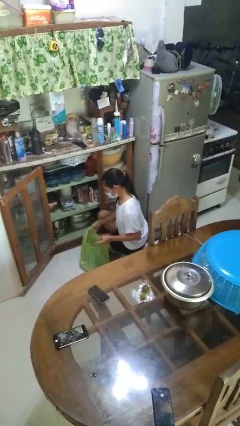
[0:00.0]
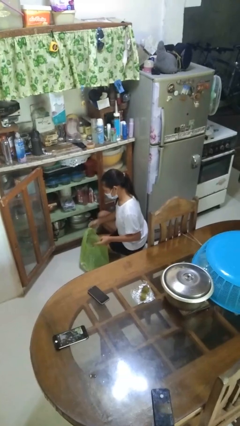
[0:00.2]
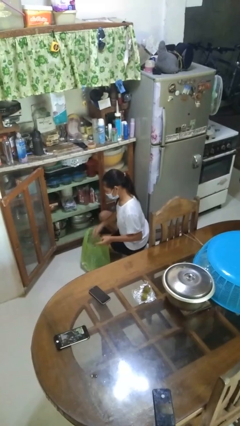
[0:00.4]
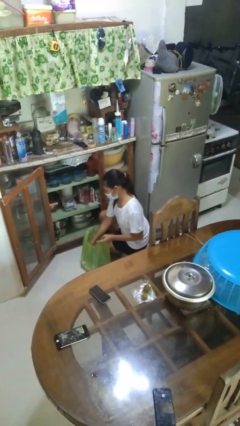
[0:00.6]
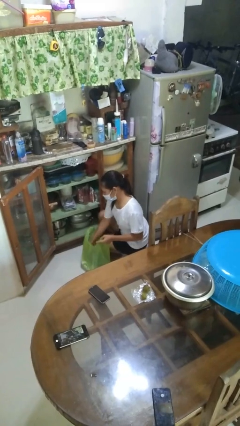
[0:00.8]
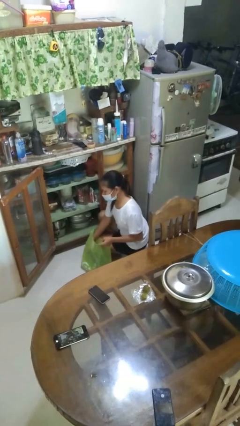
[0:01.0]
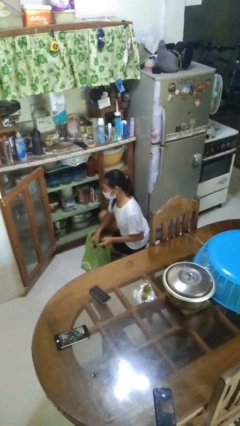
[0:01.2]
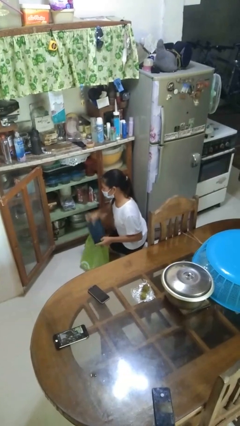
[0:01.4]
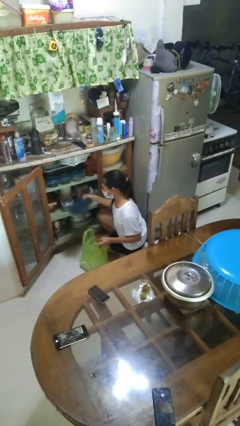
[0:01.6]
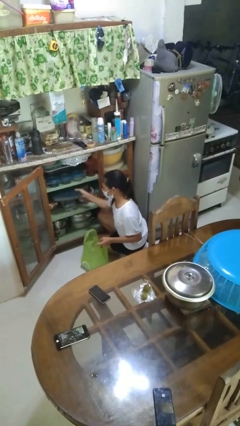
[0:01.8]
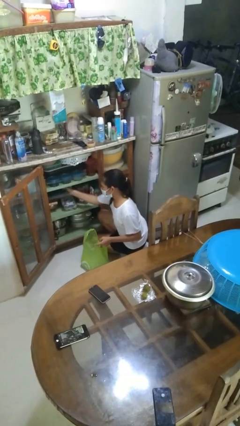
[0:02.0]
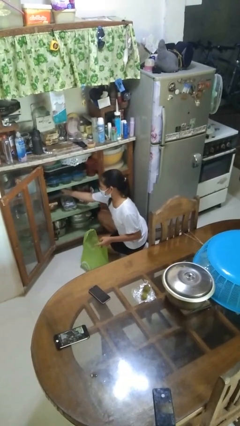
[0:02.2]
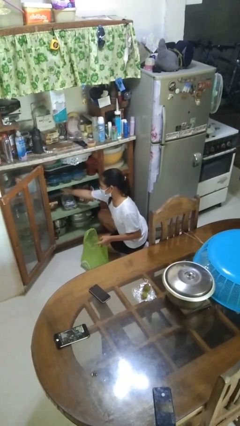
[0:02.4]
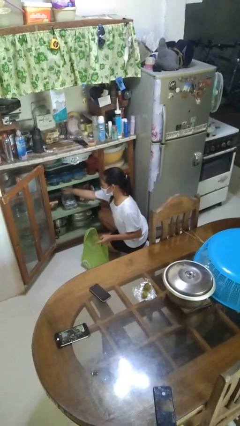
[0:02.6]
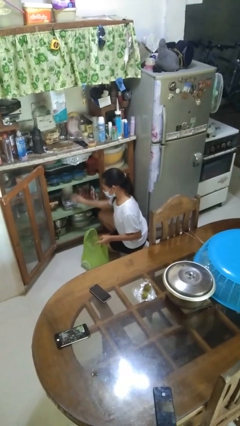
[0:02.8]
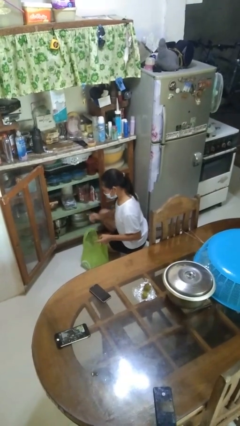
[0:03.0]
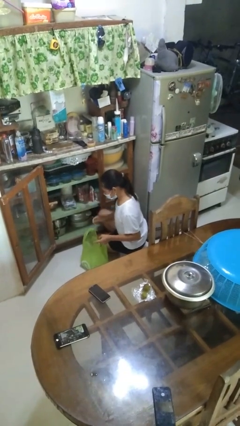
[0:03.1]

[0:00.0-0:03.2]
person loads groceries into cabinet

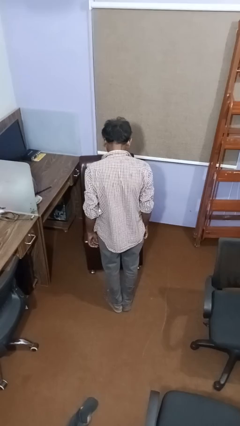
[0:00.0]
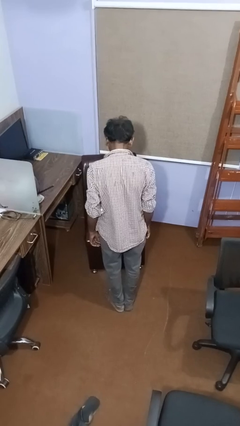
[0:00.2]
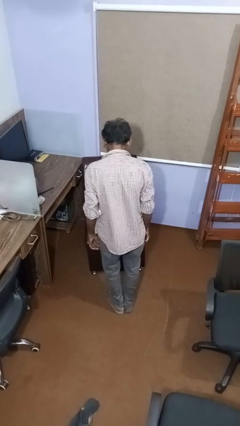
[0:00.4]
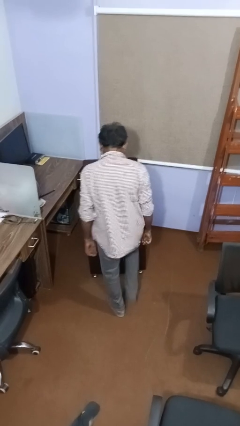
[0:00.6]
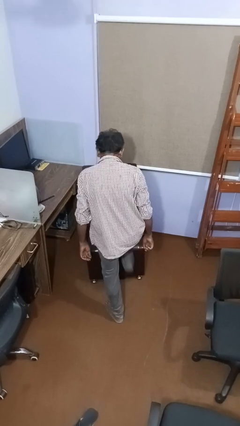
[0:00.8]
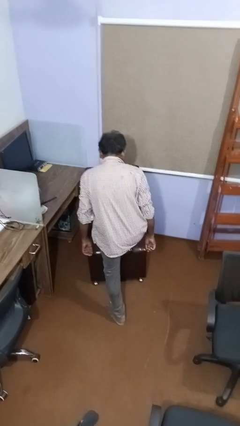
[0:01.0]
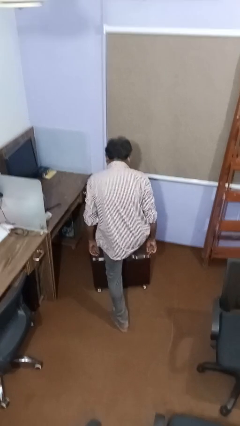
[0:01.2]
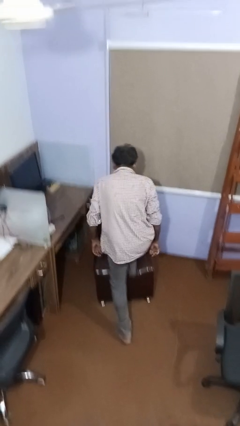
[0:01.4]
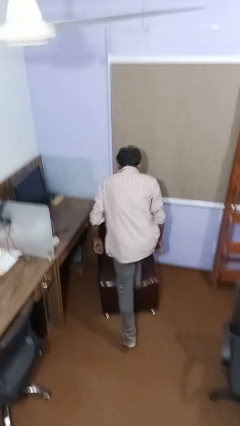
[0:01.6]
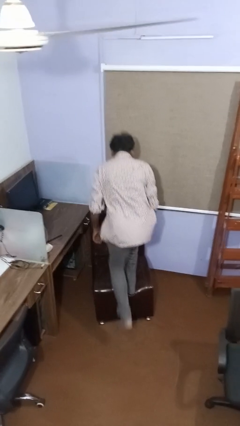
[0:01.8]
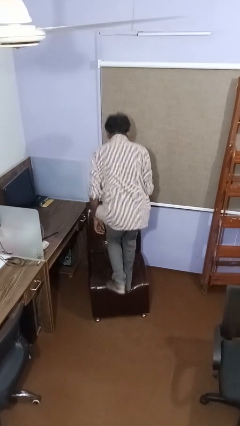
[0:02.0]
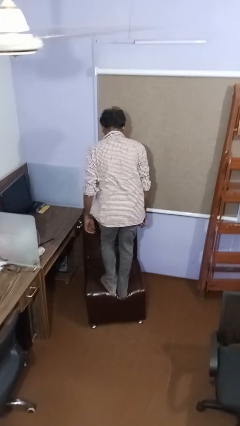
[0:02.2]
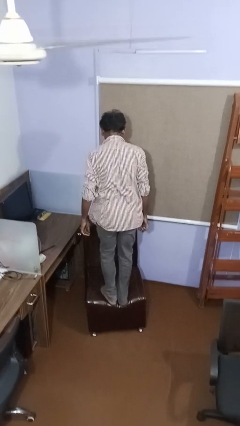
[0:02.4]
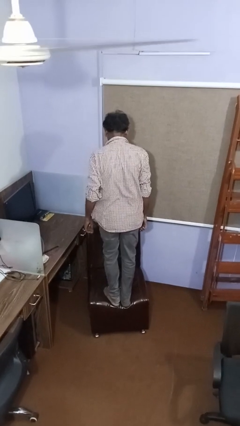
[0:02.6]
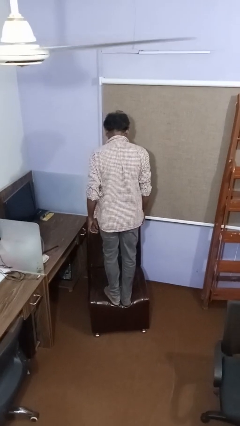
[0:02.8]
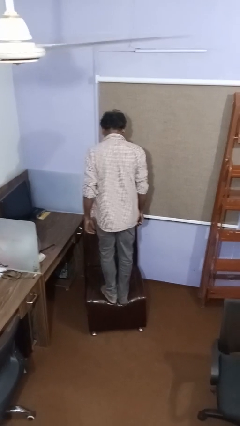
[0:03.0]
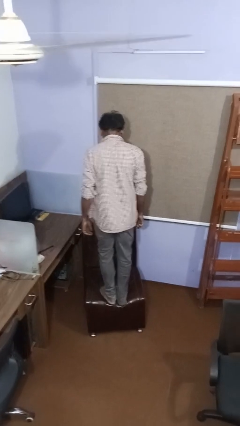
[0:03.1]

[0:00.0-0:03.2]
person climbs on couch

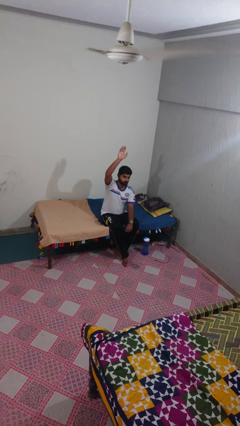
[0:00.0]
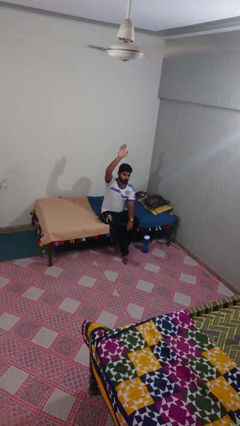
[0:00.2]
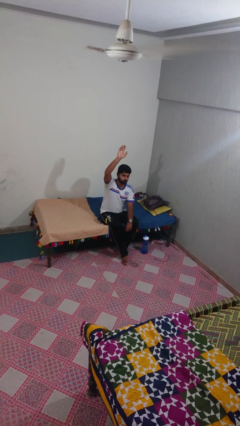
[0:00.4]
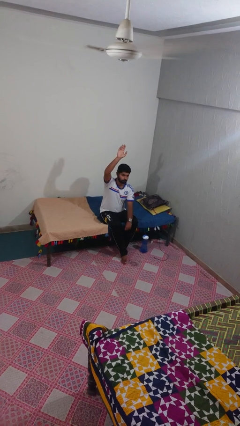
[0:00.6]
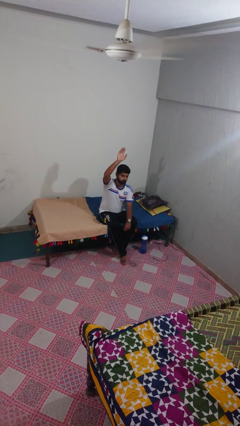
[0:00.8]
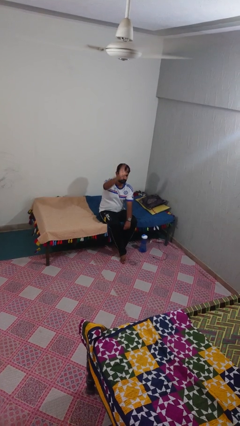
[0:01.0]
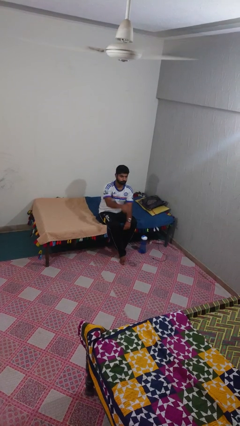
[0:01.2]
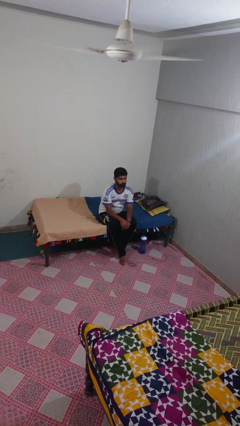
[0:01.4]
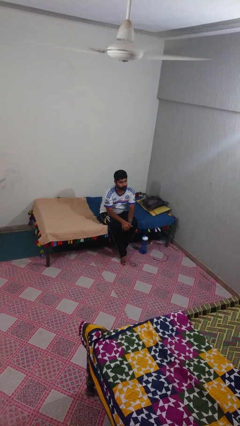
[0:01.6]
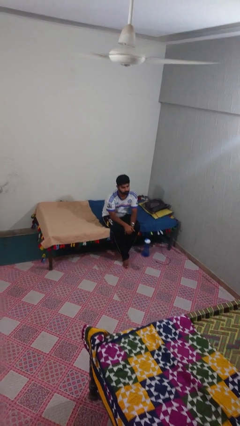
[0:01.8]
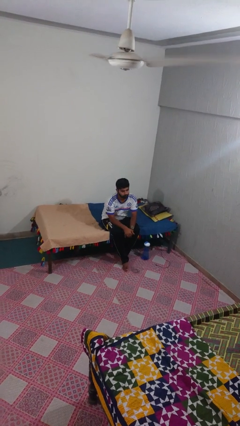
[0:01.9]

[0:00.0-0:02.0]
person gestures lower hand

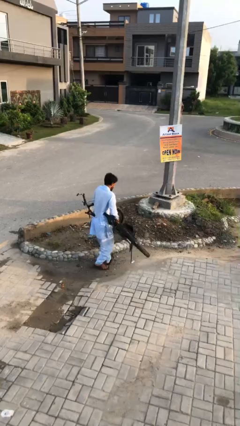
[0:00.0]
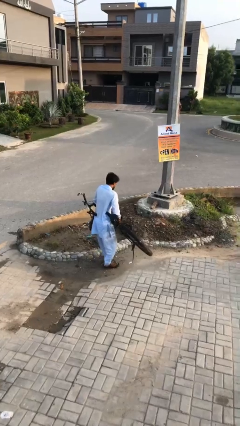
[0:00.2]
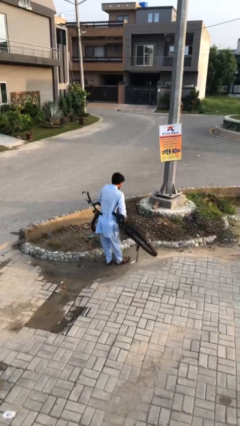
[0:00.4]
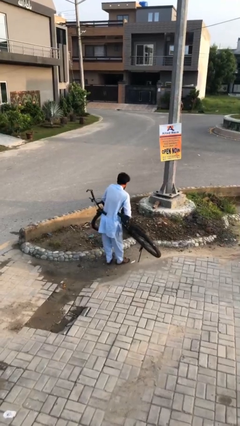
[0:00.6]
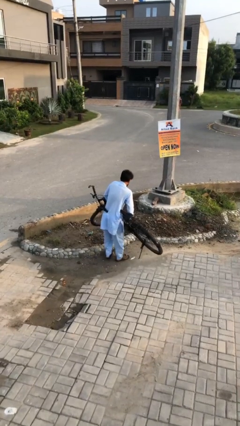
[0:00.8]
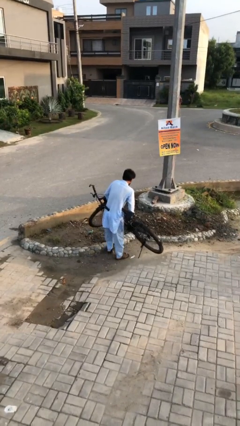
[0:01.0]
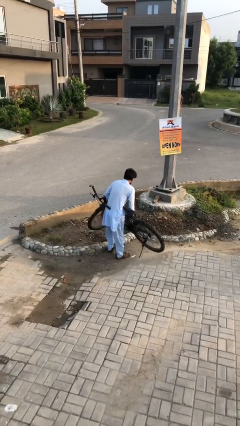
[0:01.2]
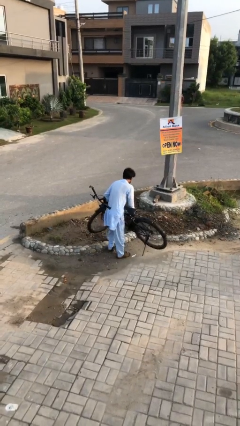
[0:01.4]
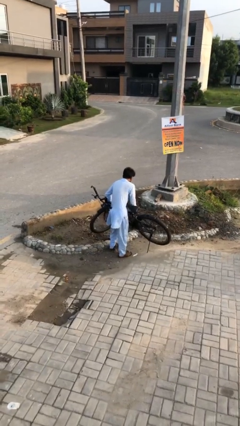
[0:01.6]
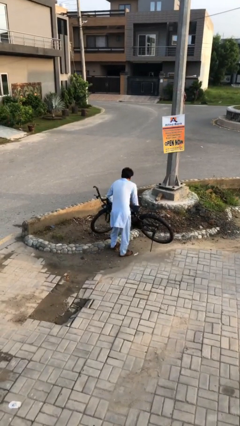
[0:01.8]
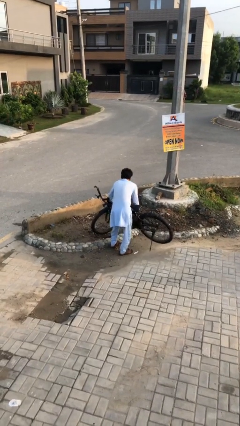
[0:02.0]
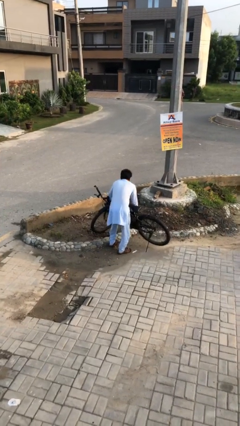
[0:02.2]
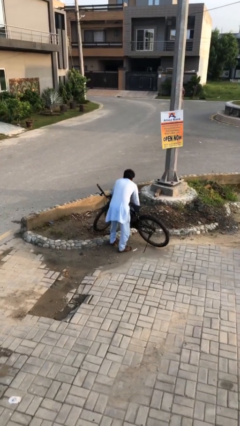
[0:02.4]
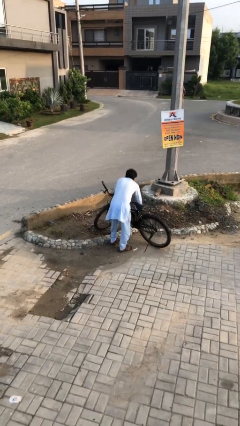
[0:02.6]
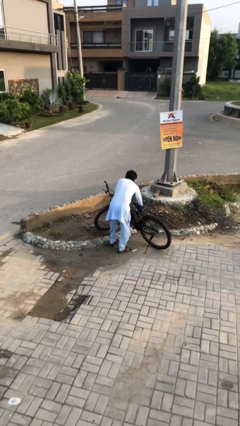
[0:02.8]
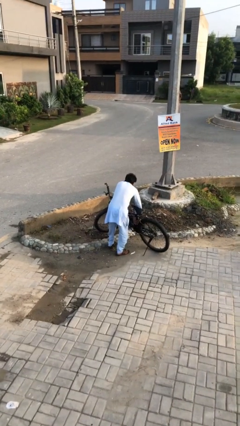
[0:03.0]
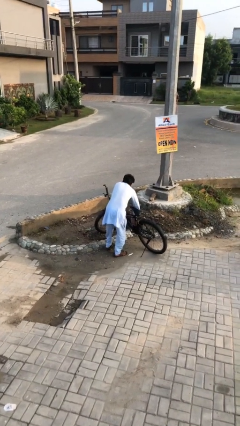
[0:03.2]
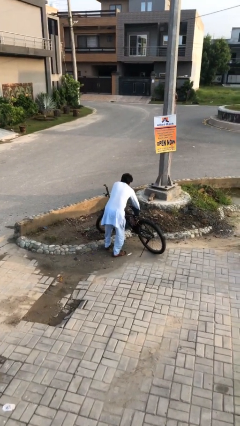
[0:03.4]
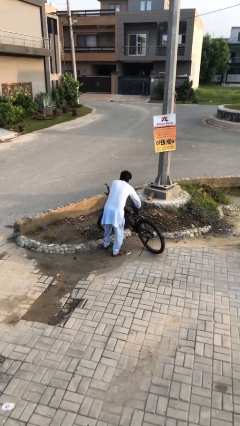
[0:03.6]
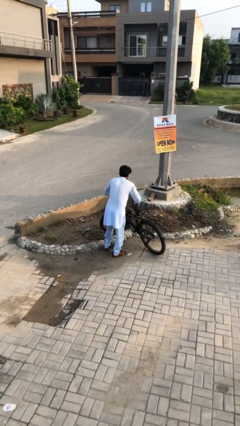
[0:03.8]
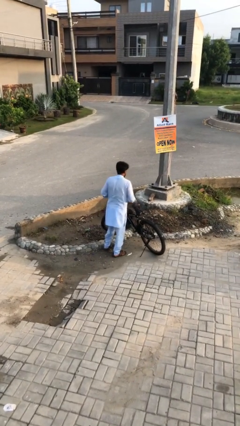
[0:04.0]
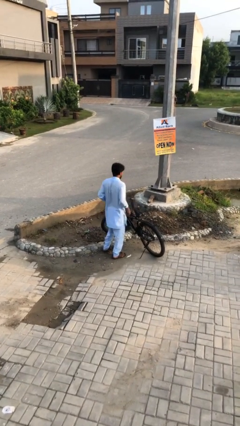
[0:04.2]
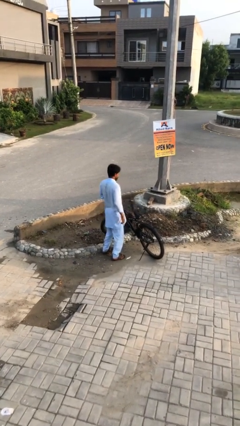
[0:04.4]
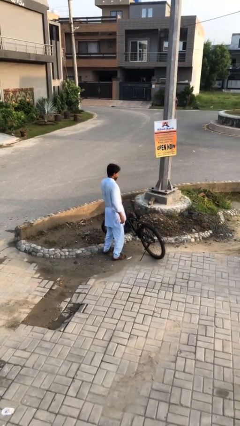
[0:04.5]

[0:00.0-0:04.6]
person puts down object on floor

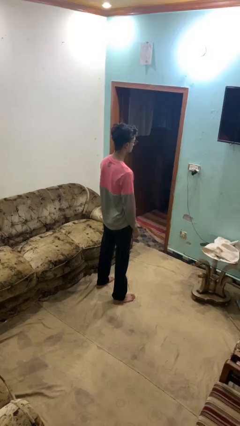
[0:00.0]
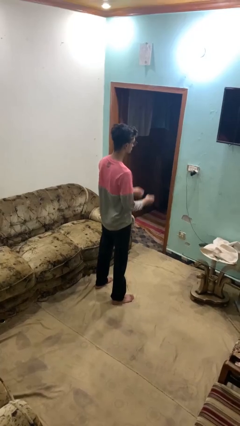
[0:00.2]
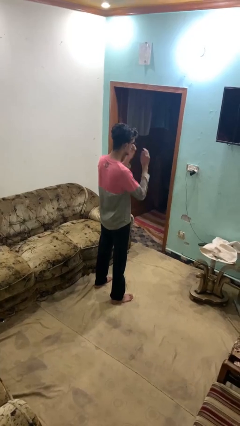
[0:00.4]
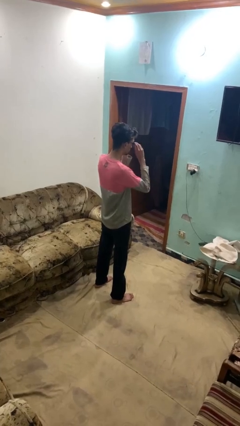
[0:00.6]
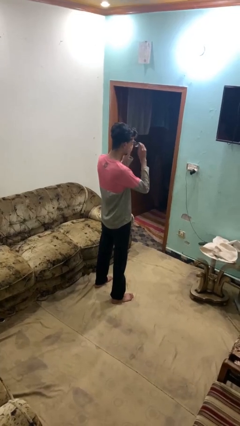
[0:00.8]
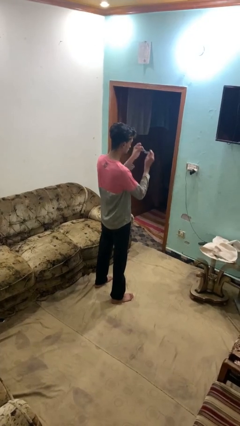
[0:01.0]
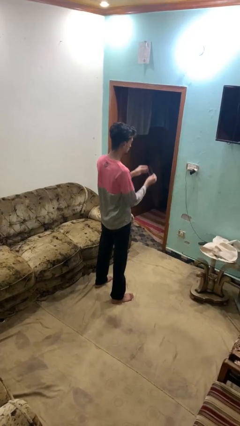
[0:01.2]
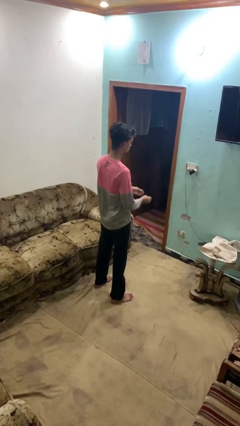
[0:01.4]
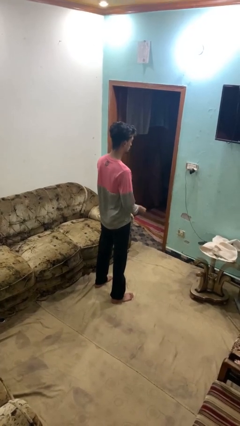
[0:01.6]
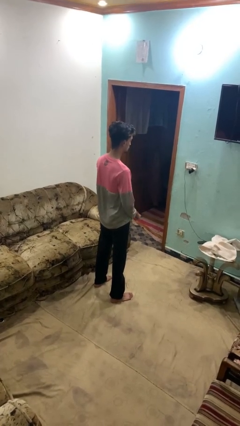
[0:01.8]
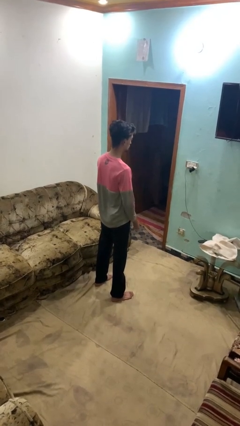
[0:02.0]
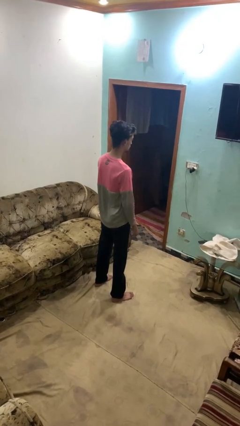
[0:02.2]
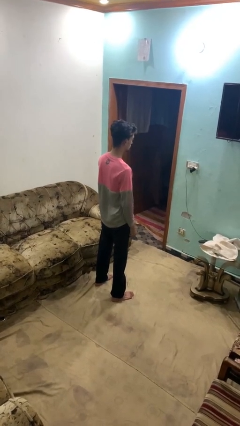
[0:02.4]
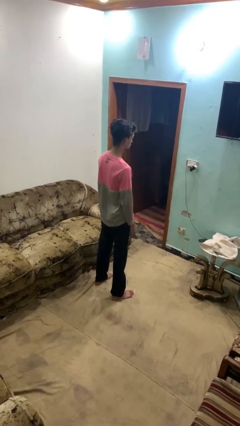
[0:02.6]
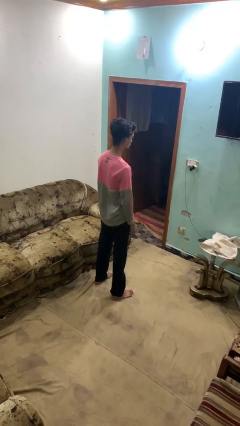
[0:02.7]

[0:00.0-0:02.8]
person takes off glasses

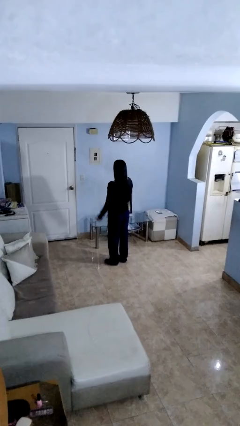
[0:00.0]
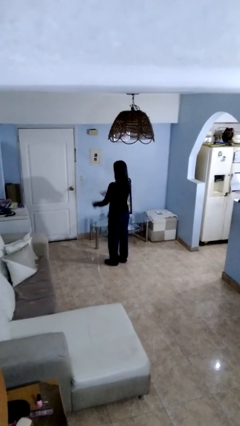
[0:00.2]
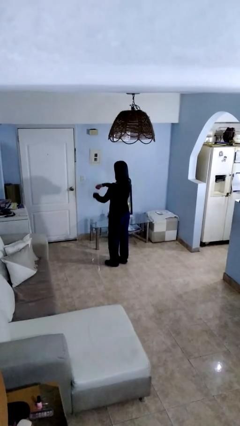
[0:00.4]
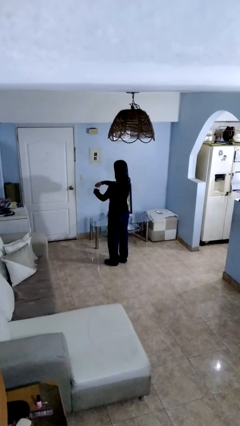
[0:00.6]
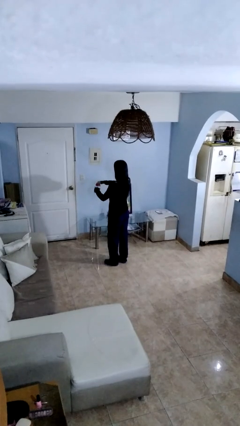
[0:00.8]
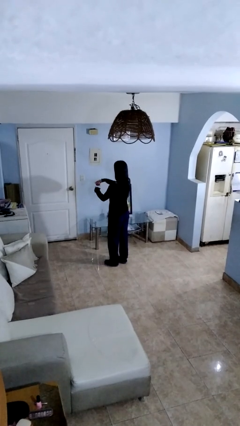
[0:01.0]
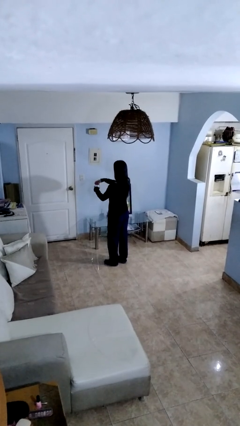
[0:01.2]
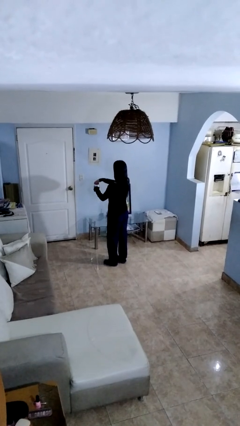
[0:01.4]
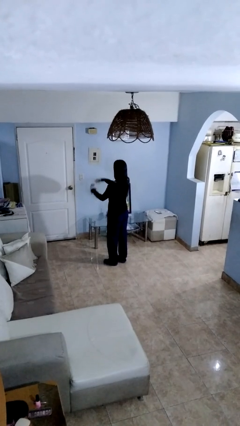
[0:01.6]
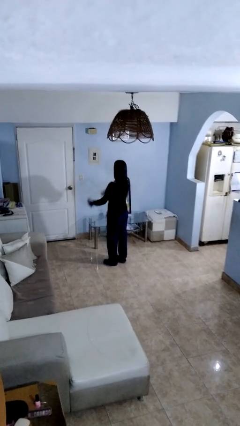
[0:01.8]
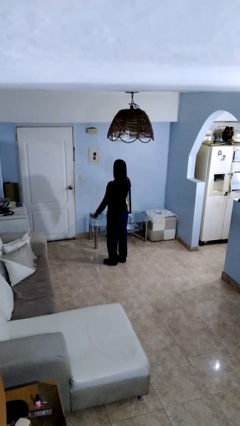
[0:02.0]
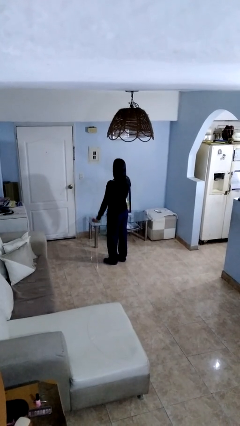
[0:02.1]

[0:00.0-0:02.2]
person closes jar
